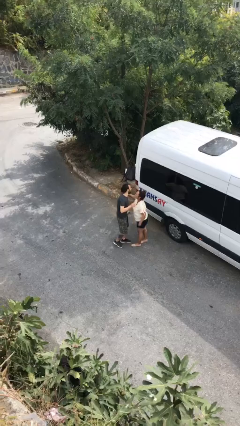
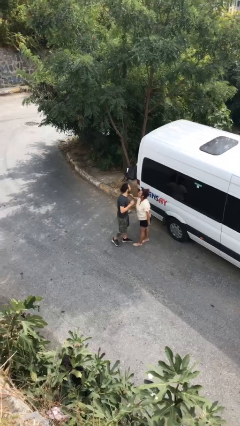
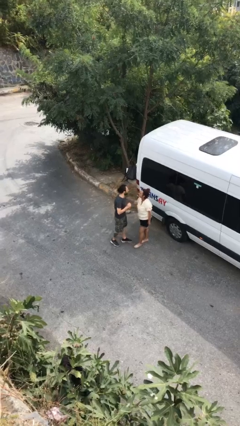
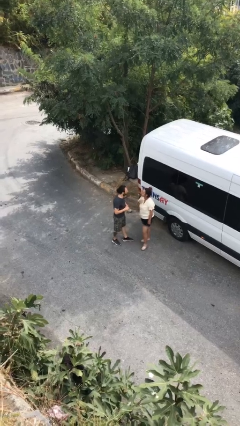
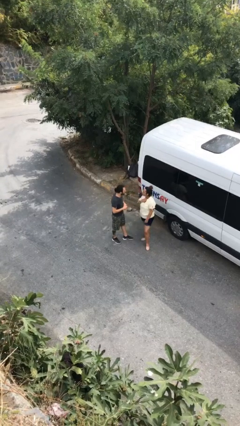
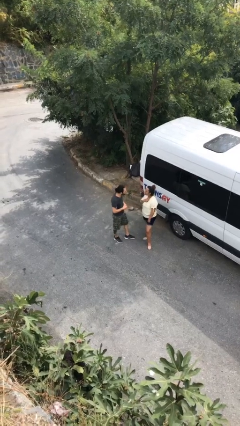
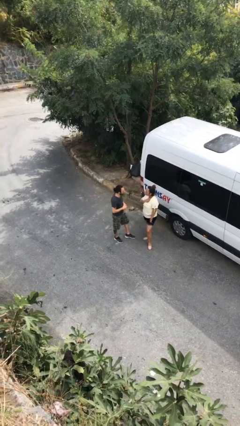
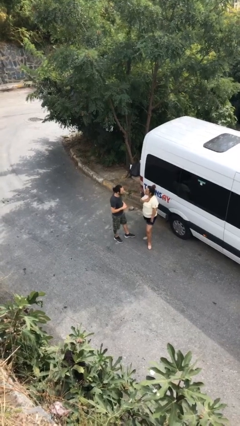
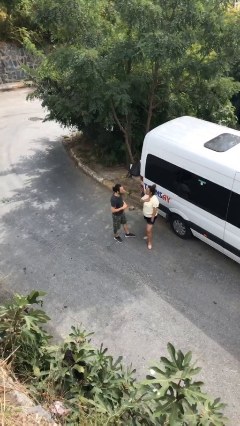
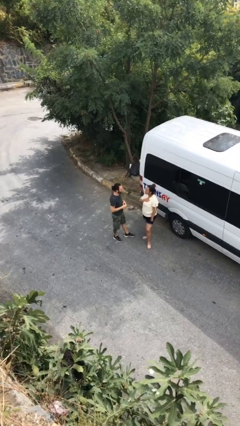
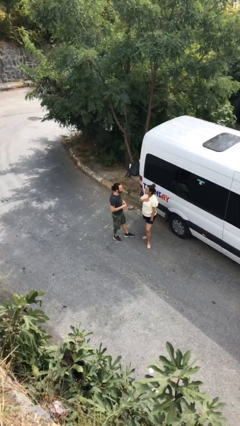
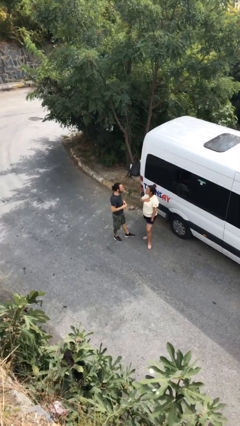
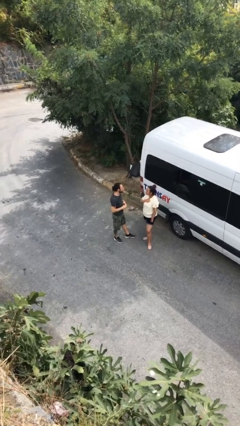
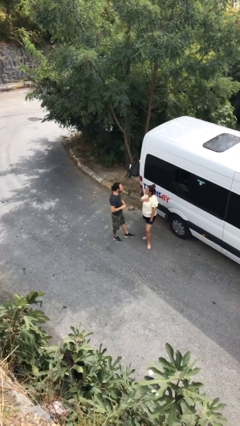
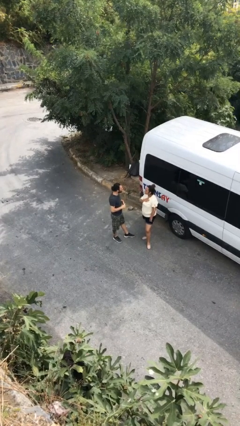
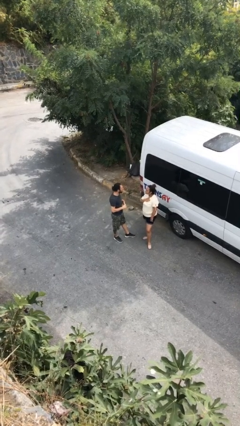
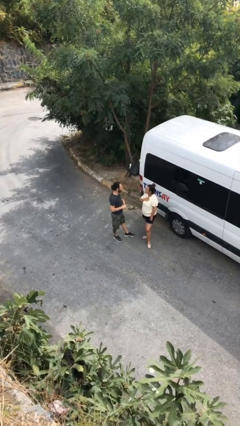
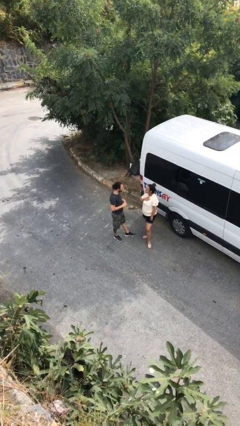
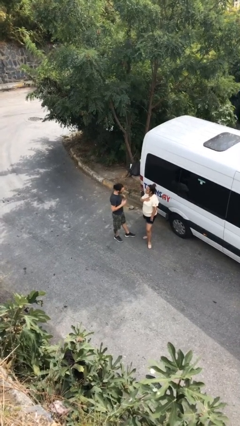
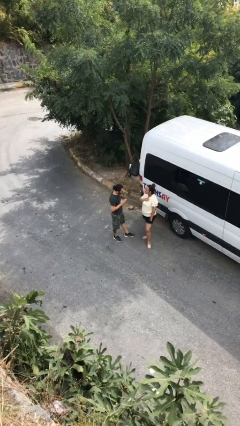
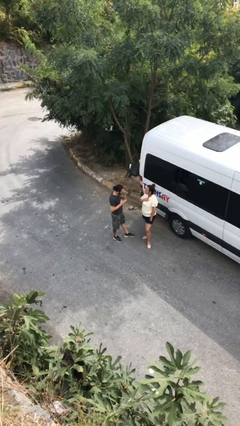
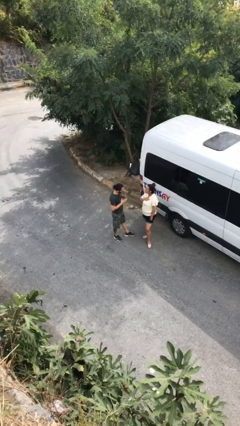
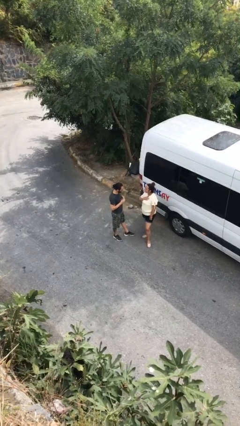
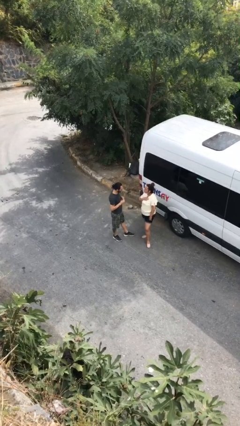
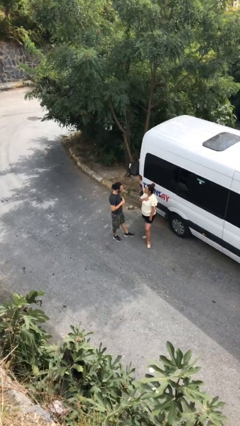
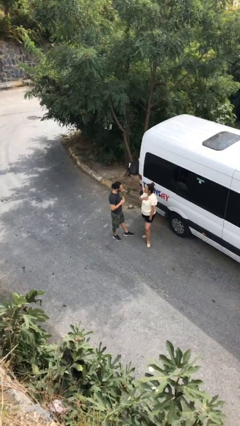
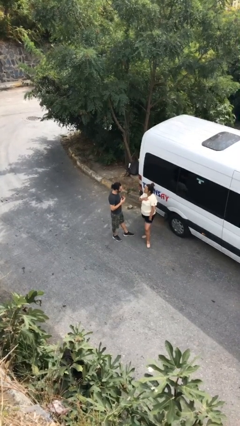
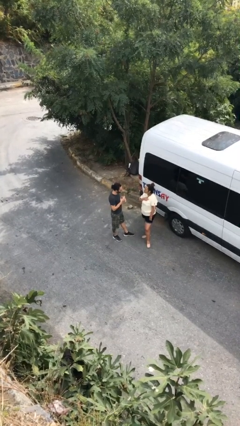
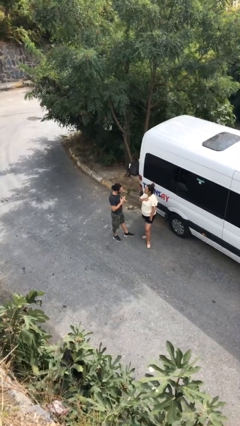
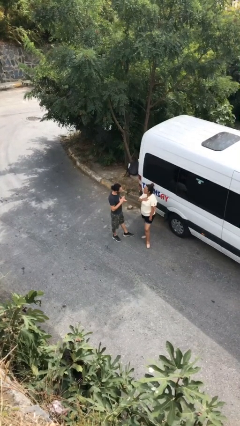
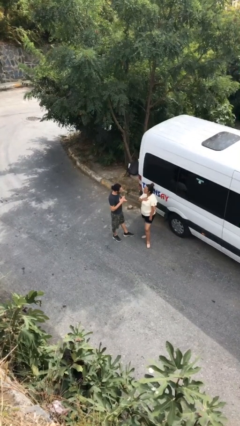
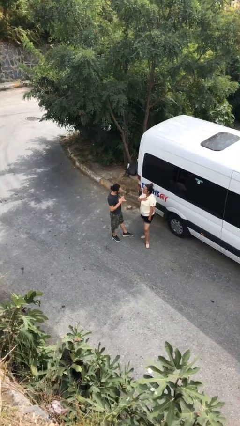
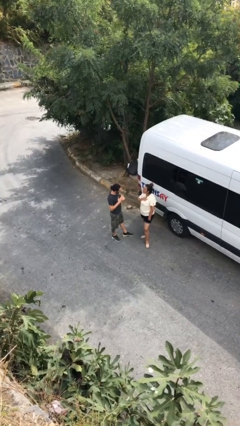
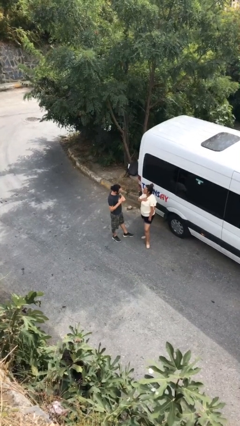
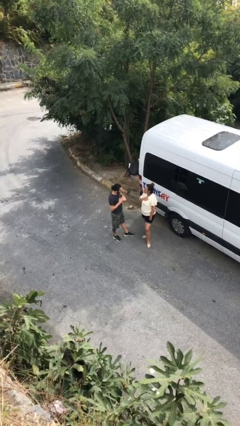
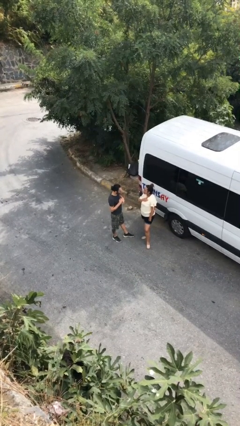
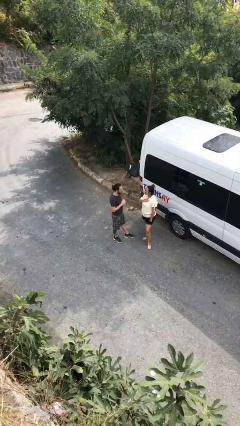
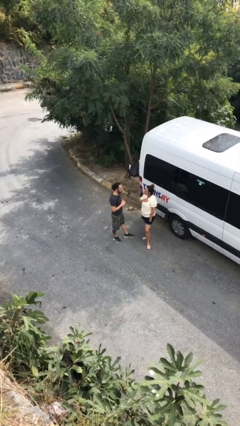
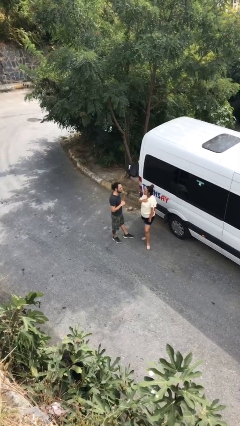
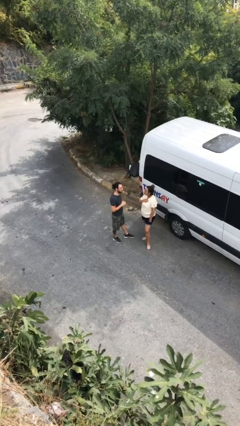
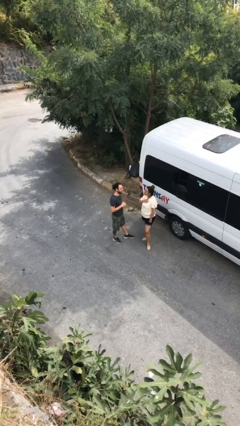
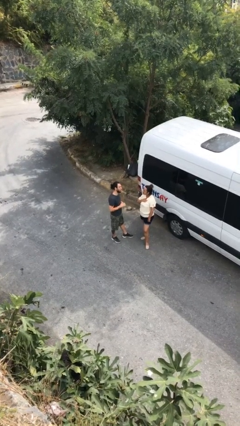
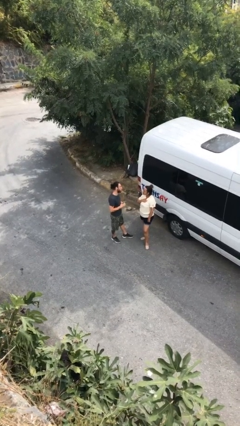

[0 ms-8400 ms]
person talks to person

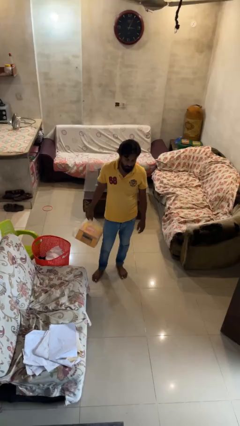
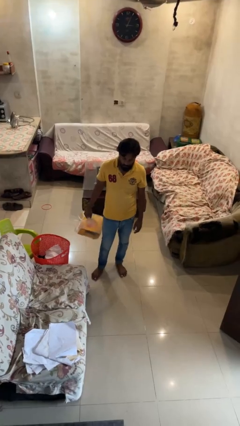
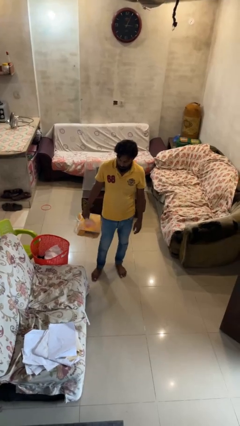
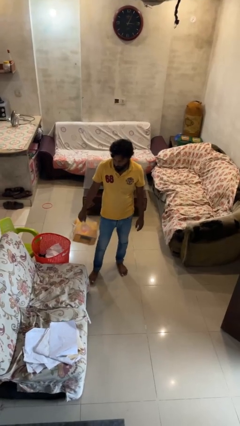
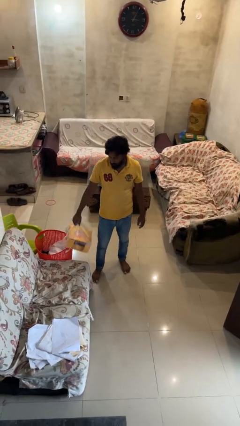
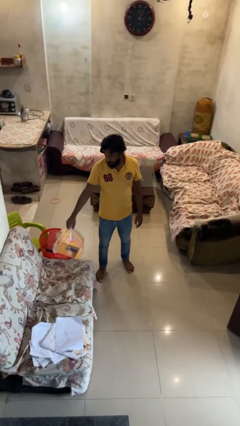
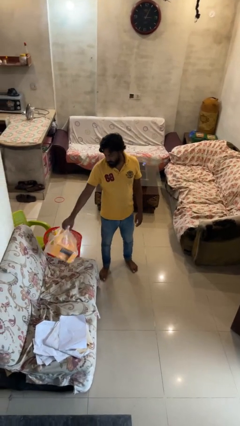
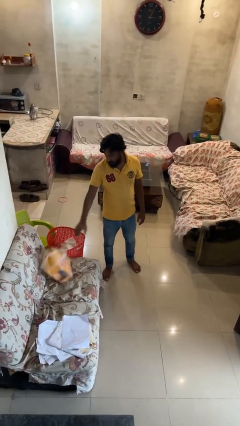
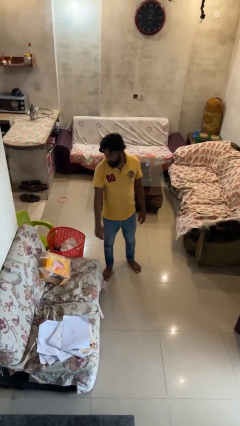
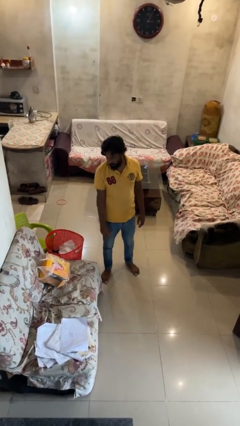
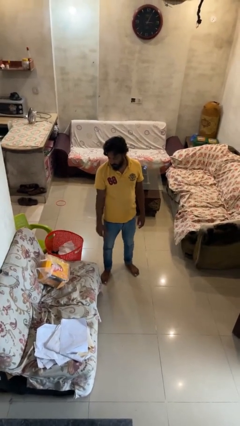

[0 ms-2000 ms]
person puts down object on couch

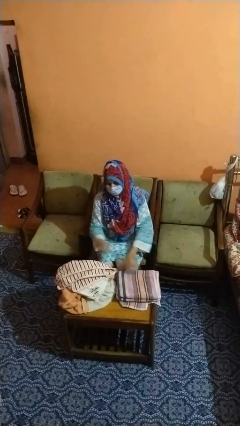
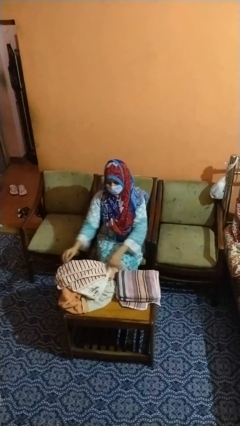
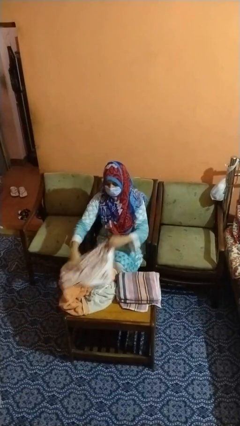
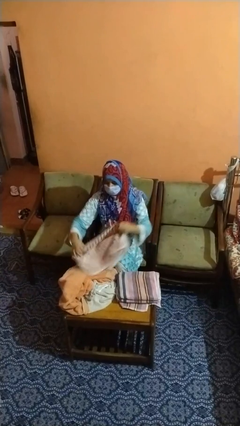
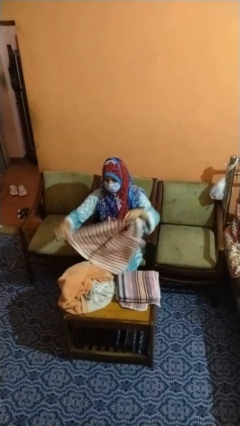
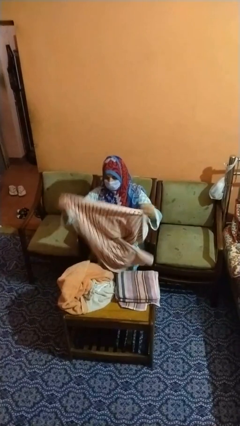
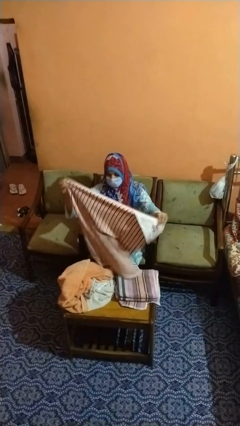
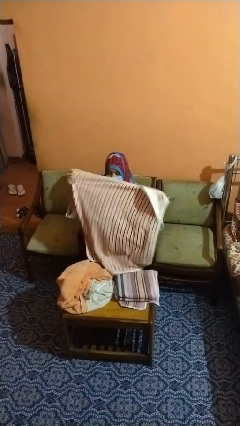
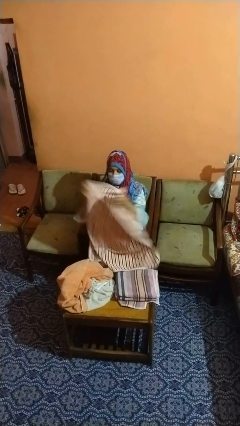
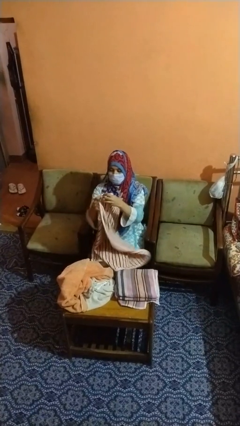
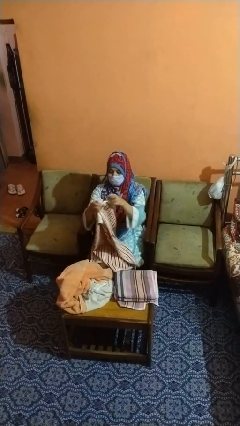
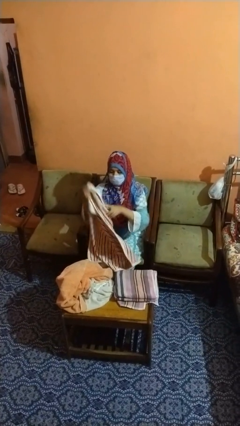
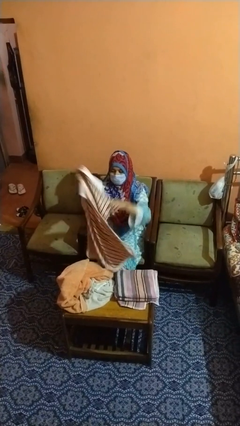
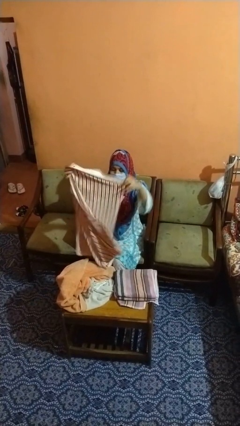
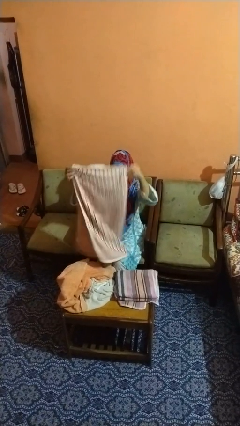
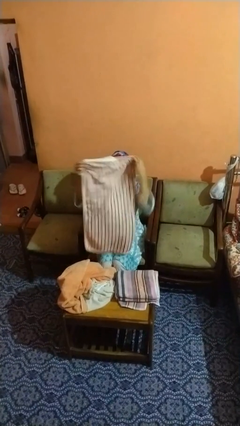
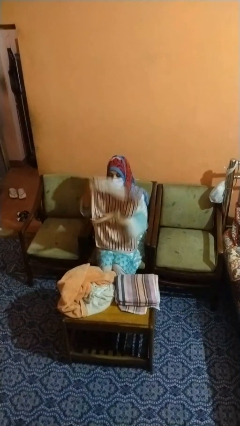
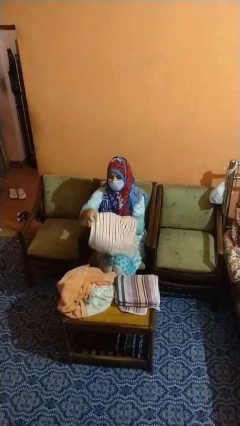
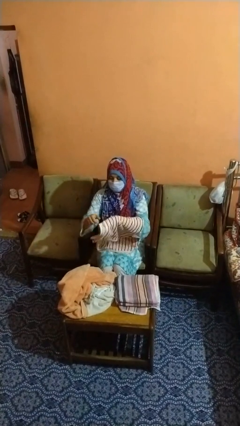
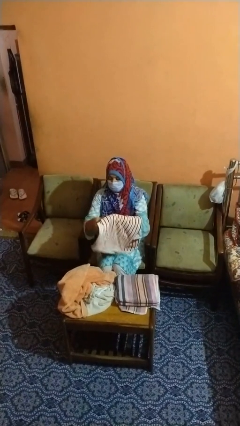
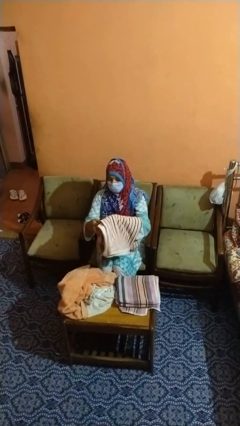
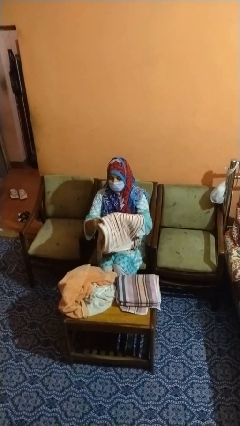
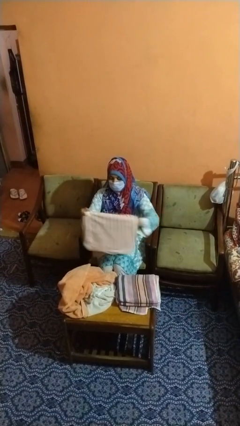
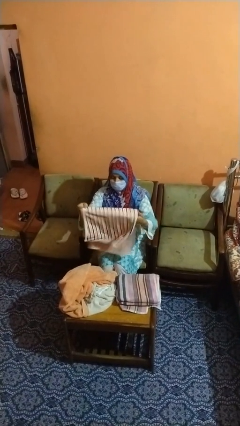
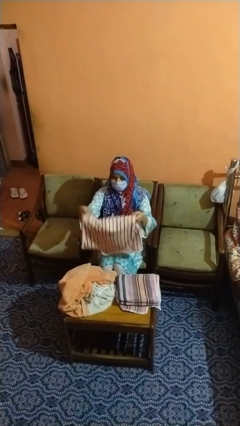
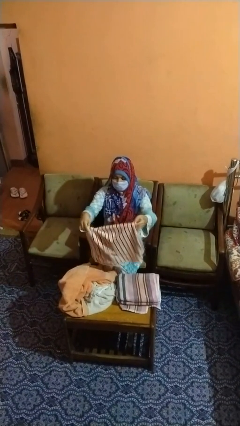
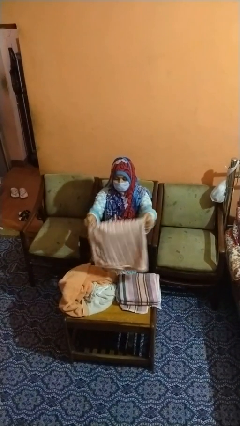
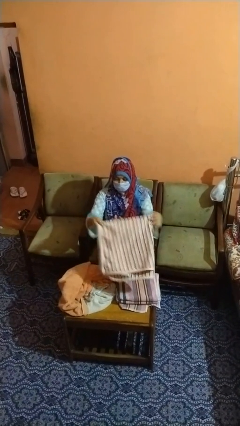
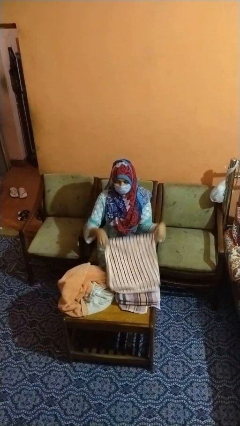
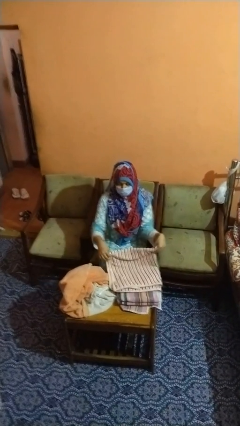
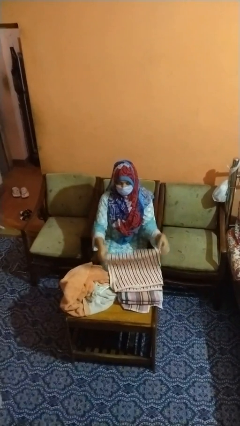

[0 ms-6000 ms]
person folds towel

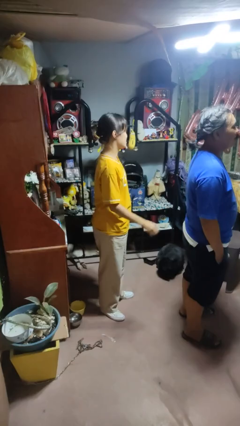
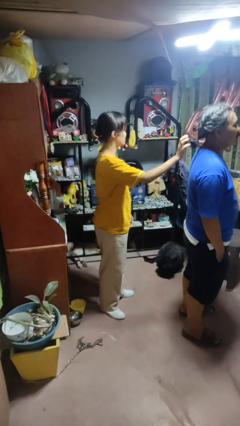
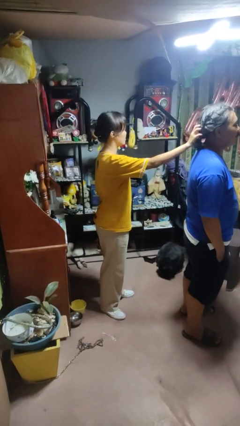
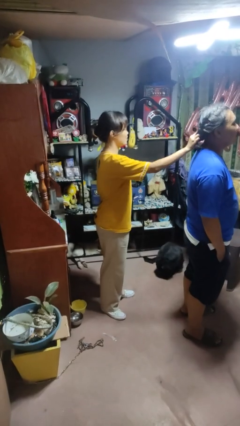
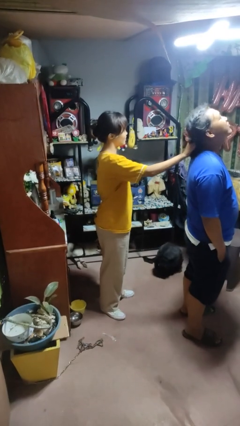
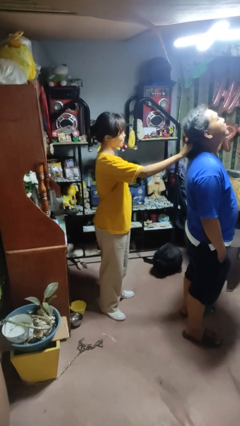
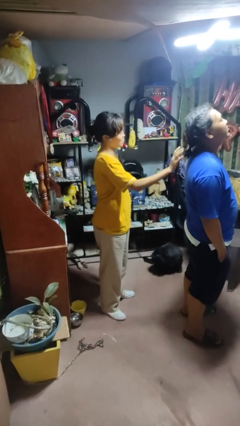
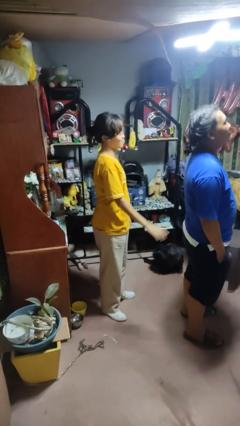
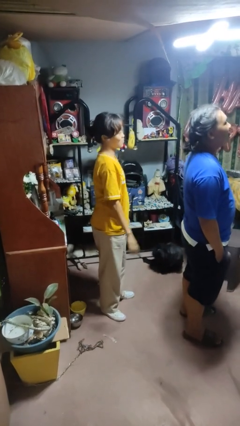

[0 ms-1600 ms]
person grabs person by hair
